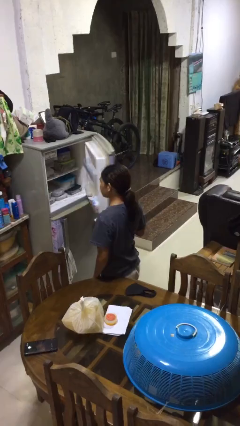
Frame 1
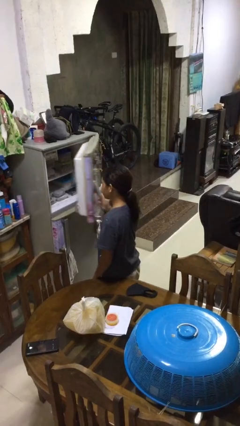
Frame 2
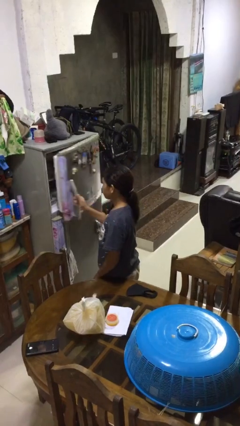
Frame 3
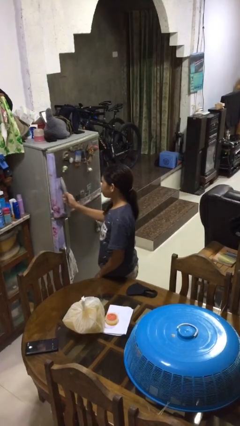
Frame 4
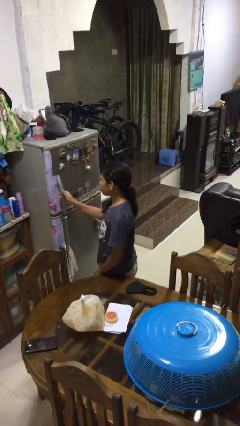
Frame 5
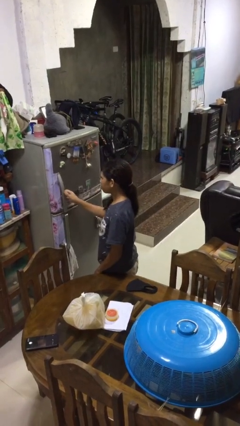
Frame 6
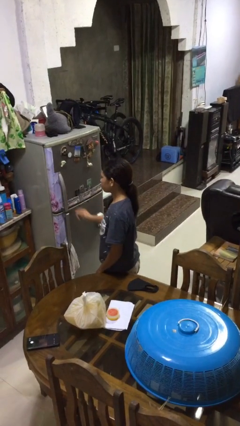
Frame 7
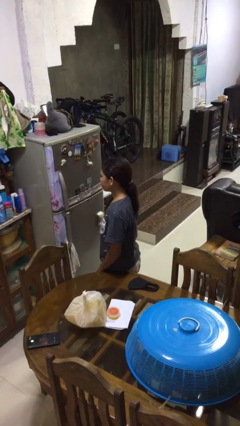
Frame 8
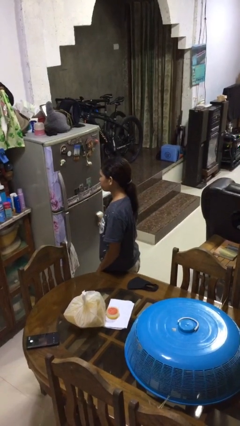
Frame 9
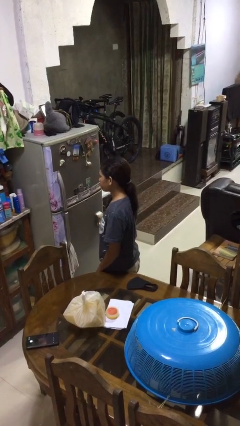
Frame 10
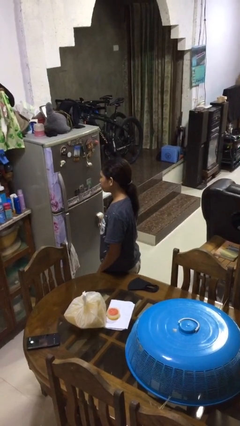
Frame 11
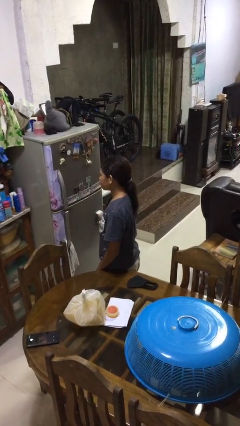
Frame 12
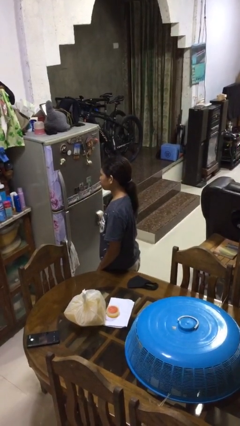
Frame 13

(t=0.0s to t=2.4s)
person closes refrigerator

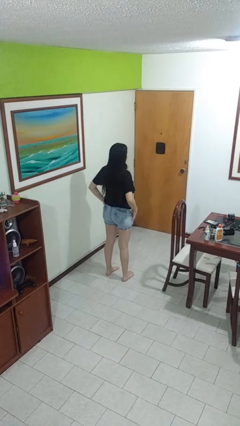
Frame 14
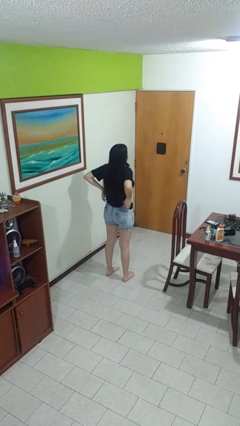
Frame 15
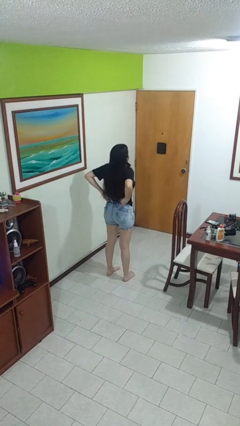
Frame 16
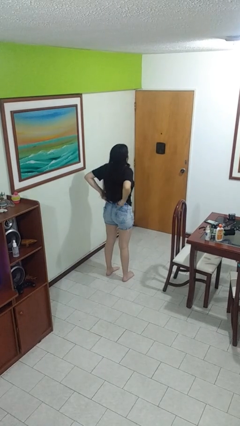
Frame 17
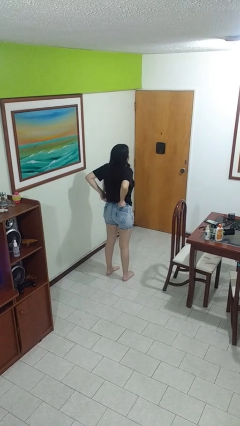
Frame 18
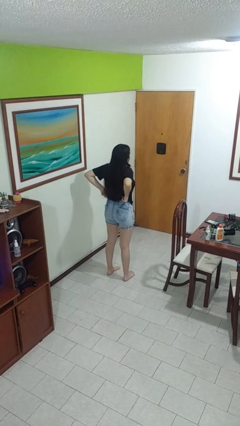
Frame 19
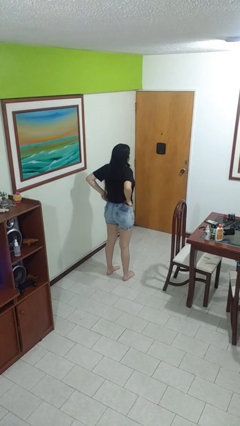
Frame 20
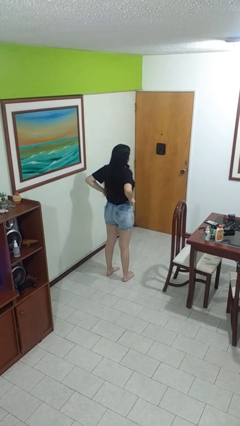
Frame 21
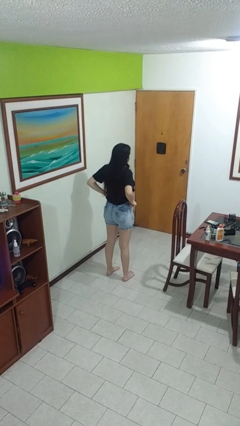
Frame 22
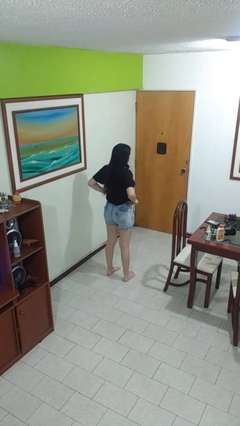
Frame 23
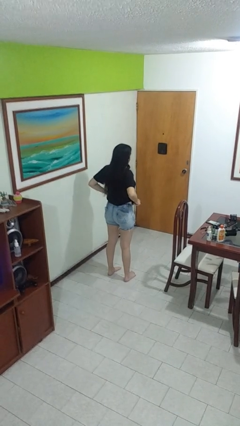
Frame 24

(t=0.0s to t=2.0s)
person hikes up pants

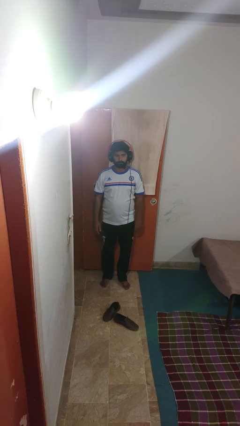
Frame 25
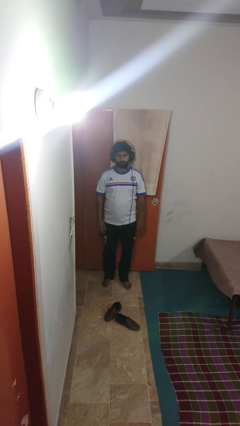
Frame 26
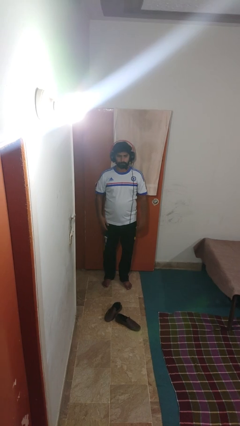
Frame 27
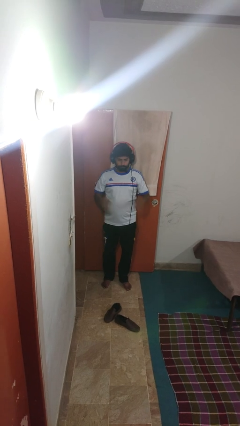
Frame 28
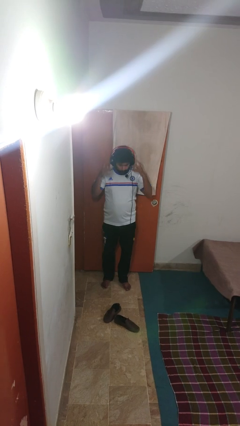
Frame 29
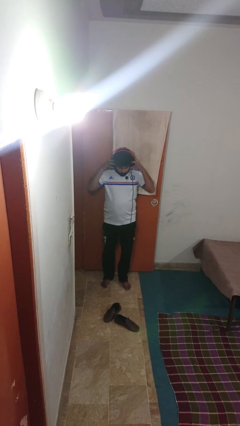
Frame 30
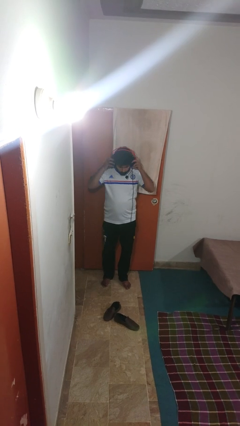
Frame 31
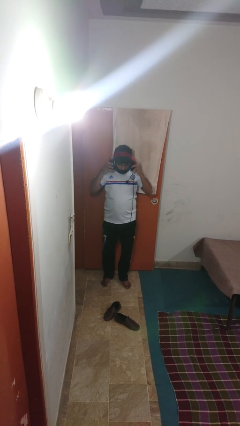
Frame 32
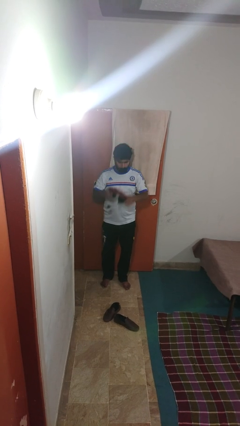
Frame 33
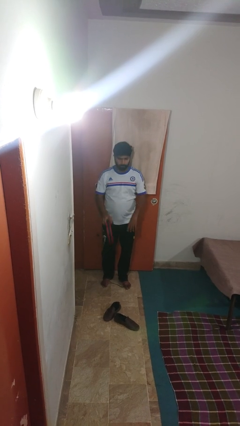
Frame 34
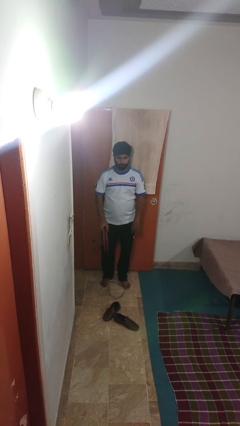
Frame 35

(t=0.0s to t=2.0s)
person takes off headphones

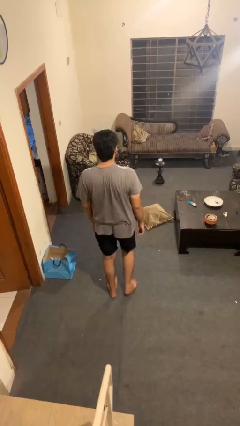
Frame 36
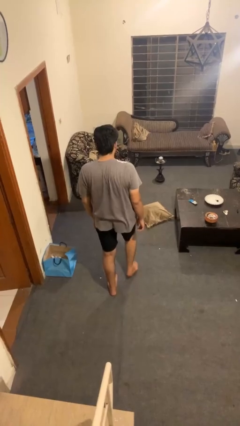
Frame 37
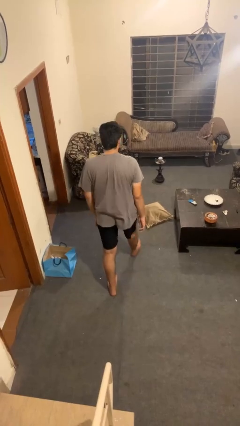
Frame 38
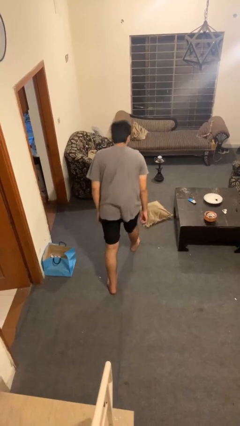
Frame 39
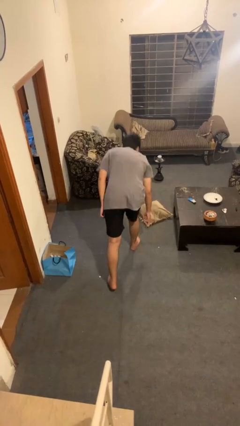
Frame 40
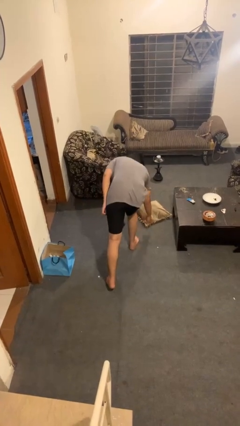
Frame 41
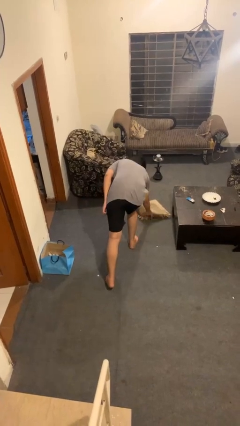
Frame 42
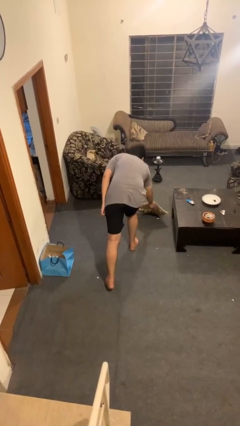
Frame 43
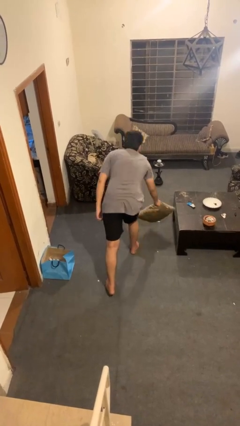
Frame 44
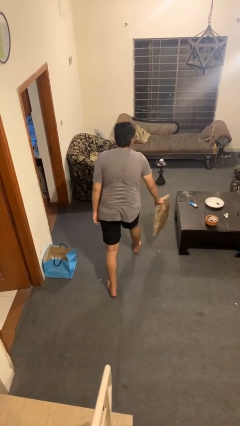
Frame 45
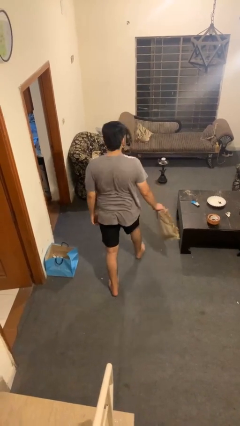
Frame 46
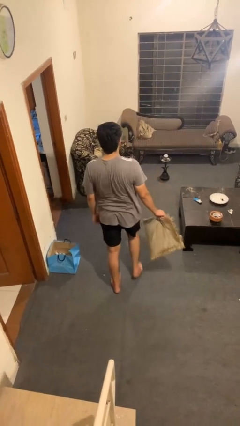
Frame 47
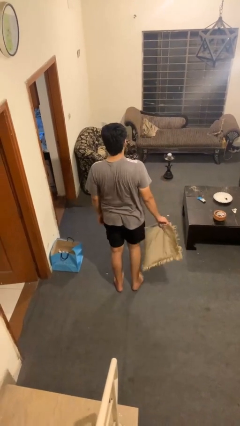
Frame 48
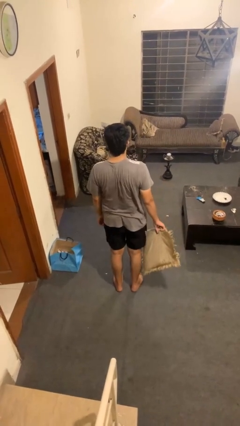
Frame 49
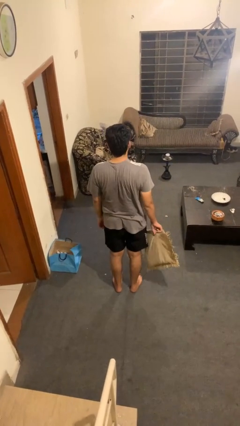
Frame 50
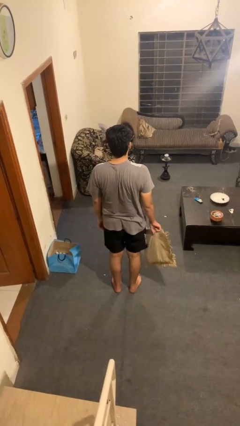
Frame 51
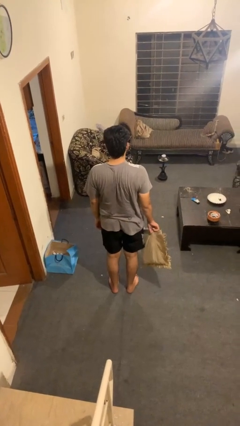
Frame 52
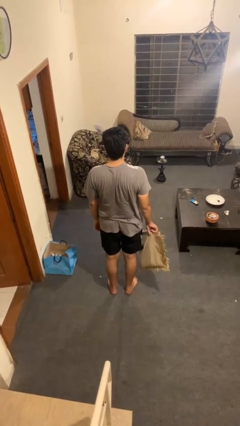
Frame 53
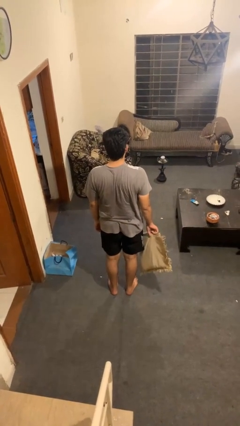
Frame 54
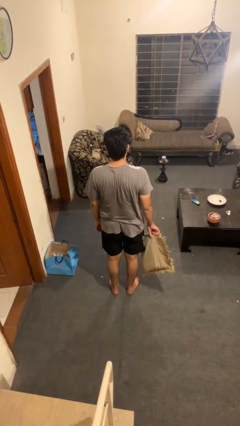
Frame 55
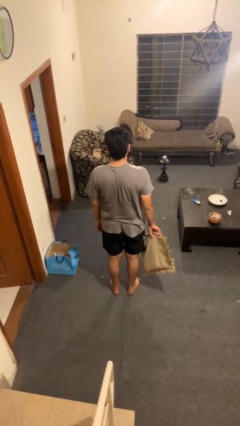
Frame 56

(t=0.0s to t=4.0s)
person picks up object from floor

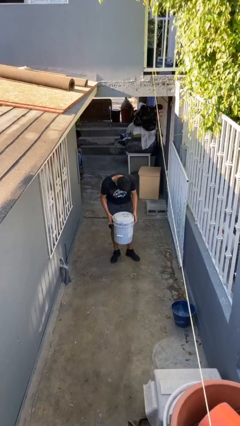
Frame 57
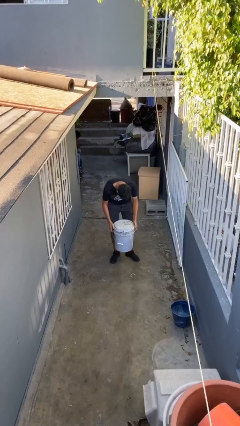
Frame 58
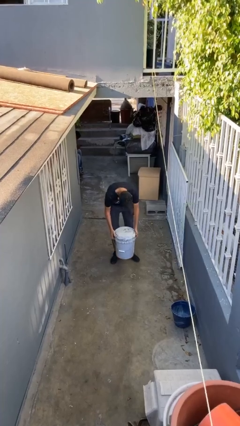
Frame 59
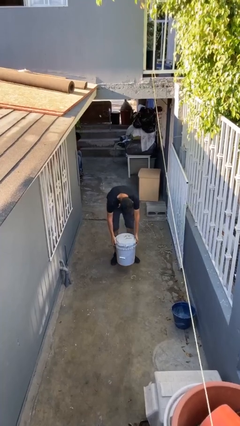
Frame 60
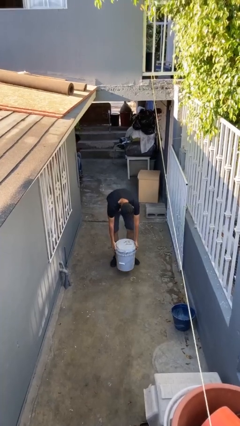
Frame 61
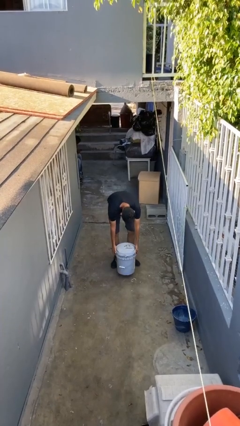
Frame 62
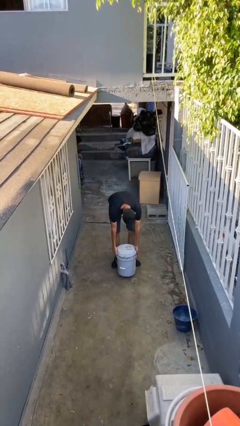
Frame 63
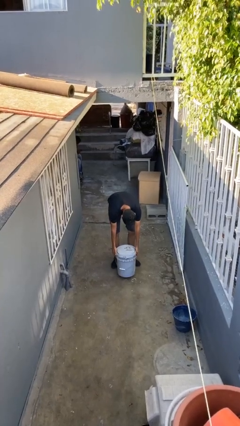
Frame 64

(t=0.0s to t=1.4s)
person puts down object on floor

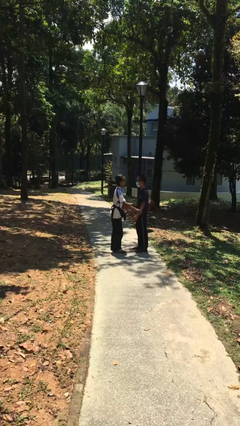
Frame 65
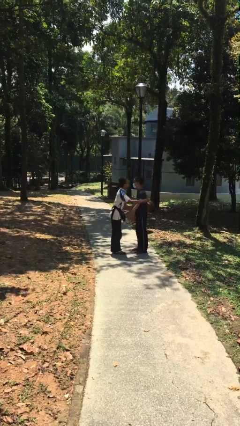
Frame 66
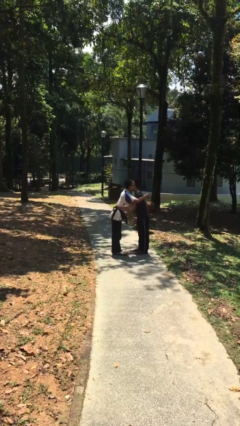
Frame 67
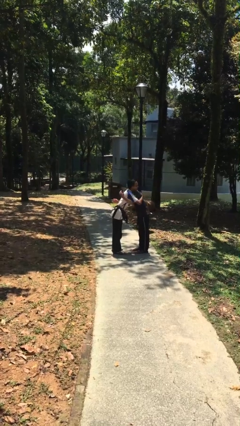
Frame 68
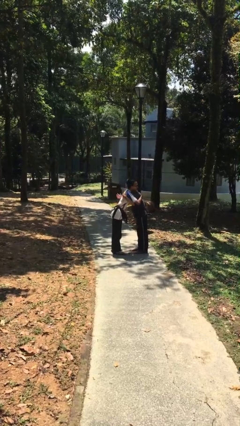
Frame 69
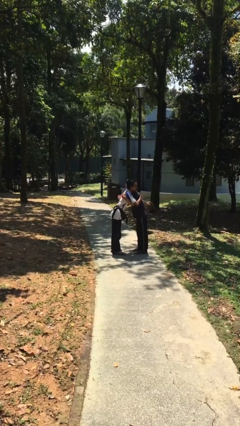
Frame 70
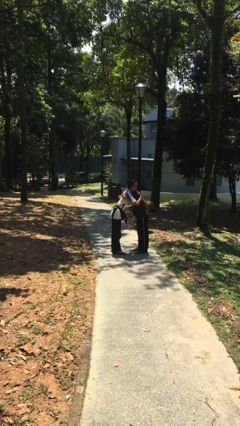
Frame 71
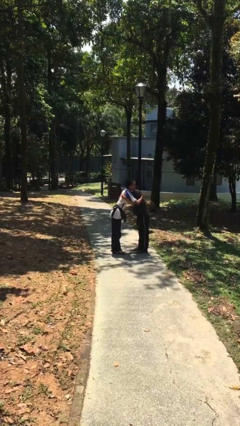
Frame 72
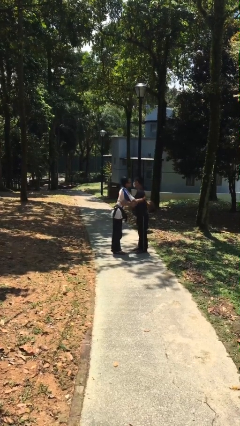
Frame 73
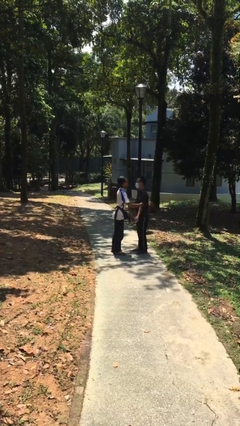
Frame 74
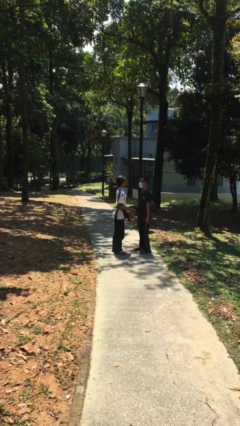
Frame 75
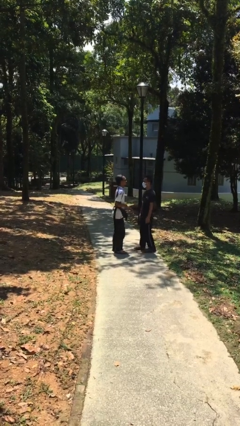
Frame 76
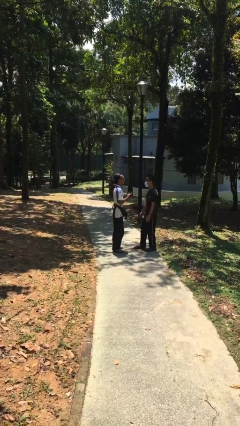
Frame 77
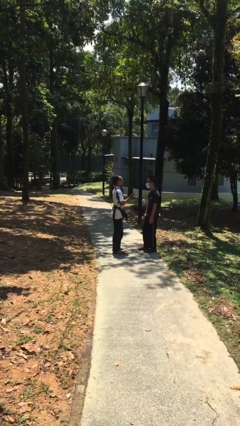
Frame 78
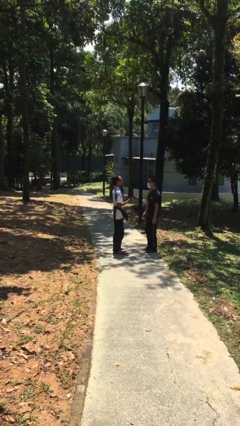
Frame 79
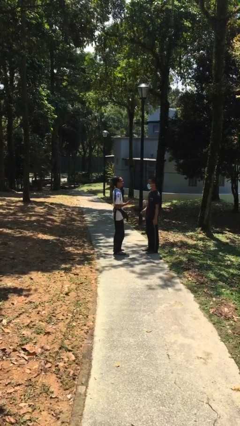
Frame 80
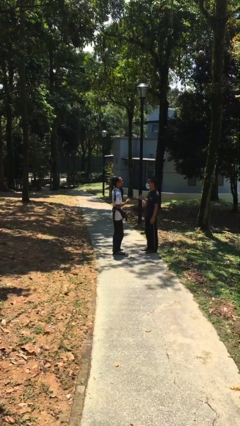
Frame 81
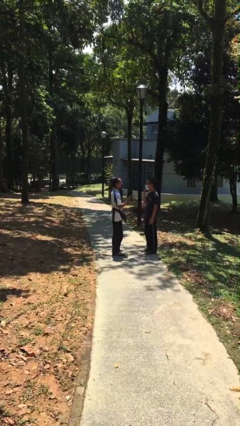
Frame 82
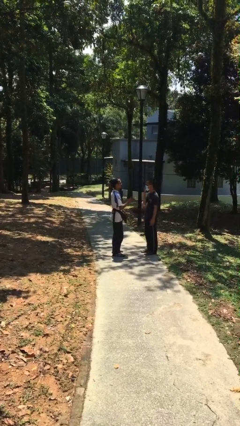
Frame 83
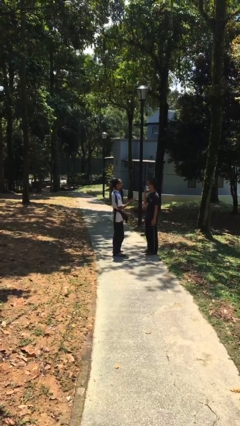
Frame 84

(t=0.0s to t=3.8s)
person embraces person

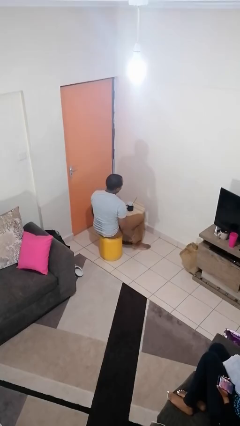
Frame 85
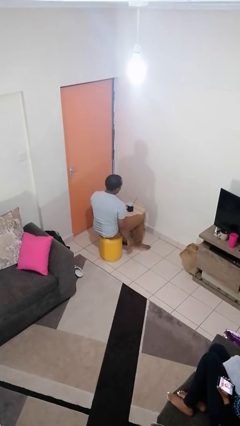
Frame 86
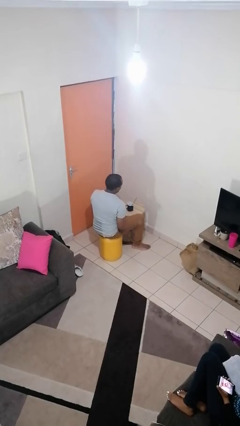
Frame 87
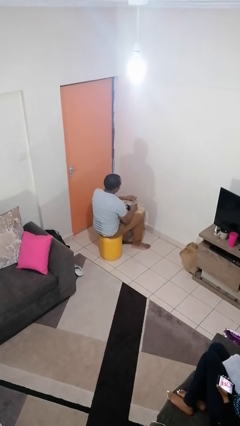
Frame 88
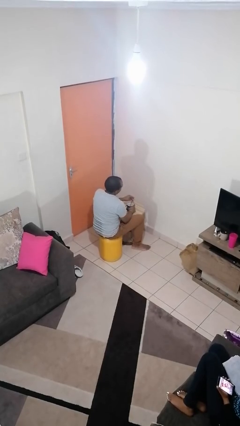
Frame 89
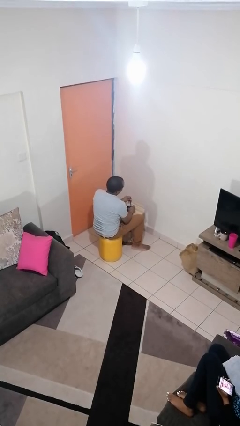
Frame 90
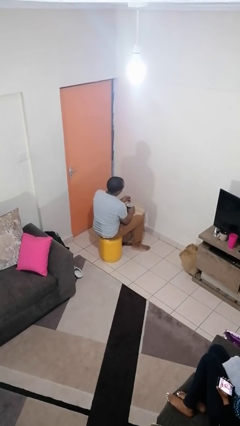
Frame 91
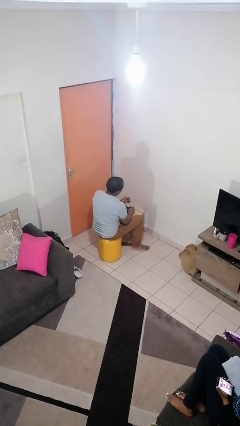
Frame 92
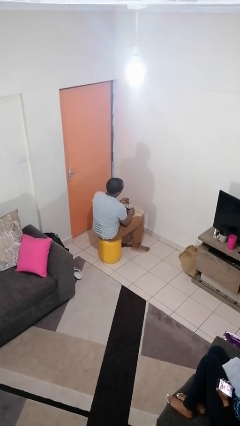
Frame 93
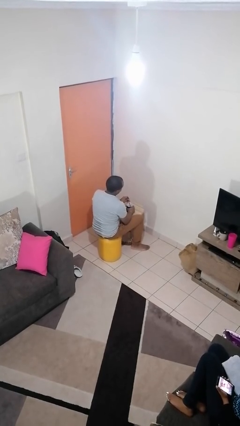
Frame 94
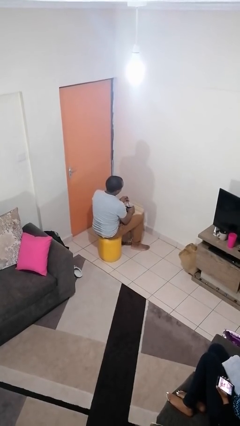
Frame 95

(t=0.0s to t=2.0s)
person stirs mug
